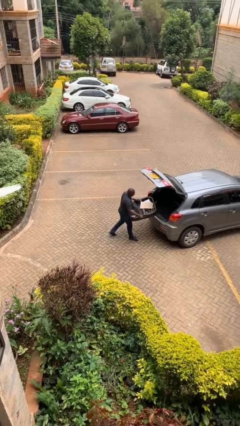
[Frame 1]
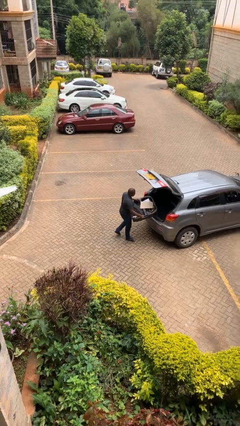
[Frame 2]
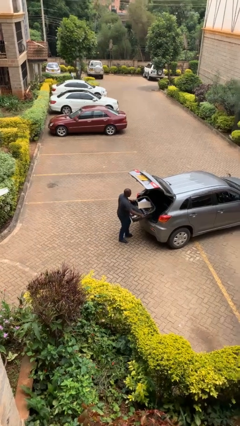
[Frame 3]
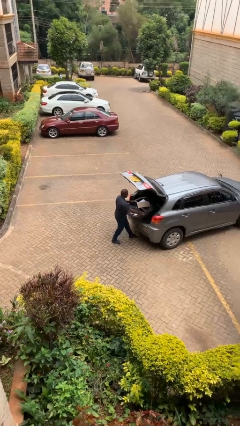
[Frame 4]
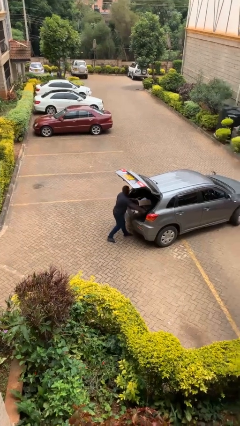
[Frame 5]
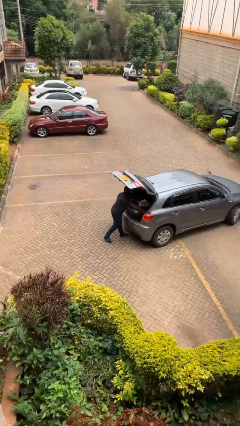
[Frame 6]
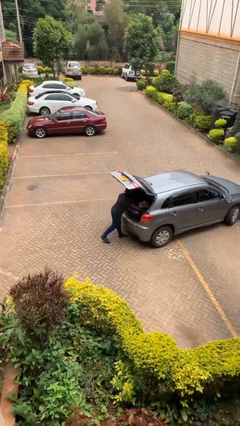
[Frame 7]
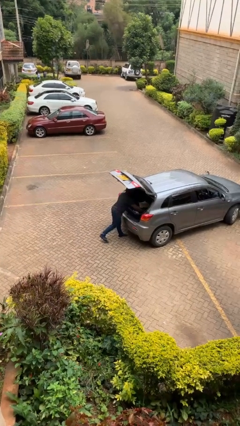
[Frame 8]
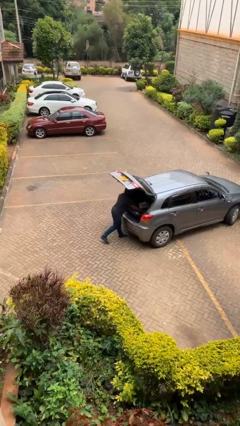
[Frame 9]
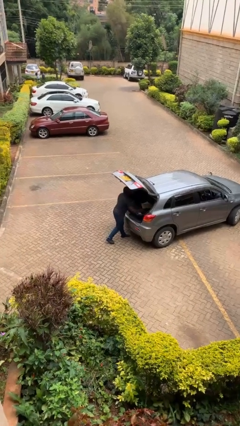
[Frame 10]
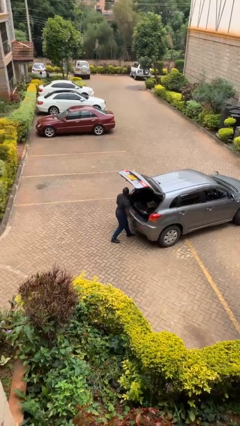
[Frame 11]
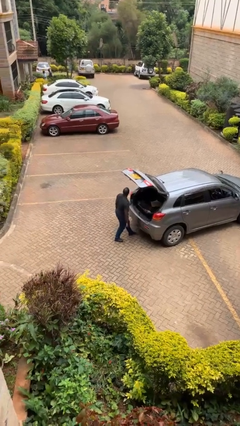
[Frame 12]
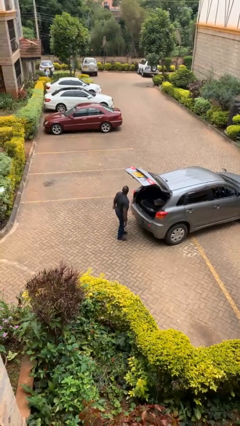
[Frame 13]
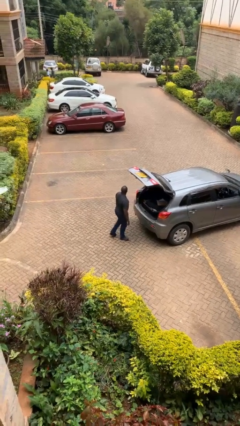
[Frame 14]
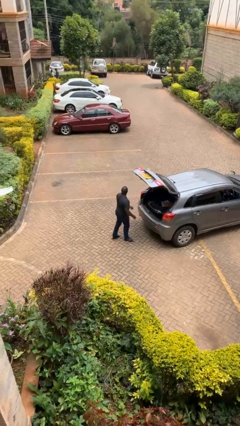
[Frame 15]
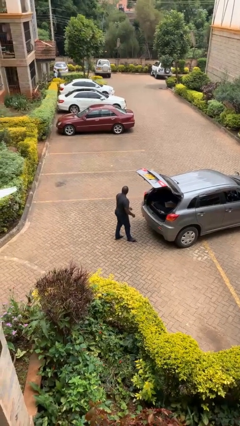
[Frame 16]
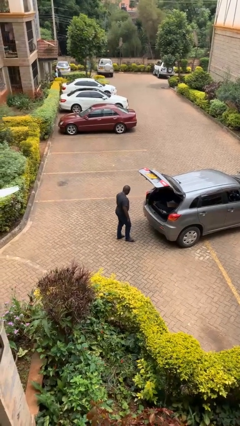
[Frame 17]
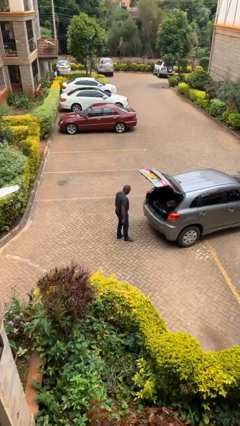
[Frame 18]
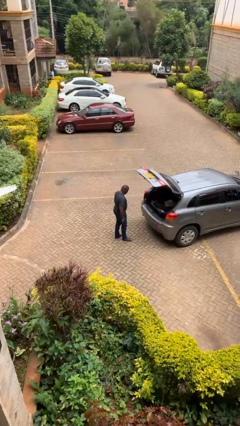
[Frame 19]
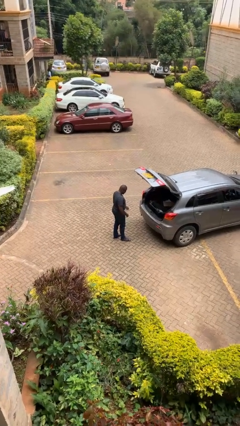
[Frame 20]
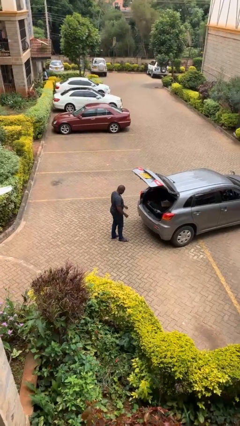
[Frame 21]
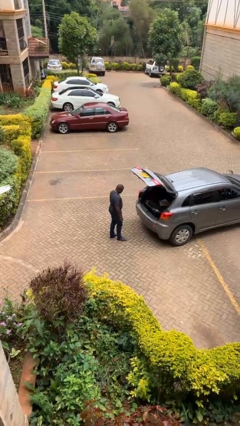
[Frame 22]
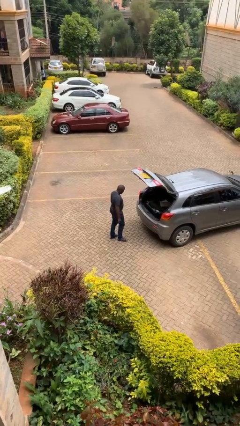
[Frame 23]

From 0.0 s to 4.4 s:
person loads car

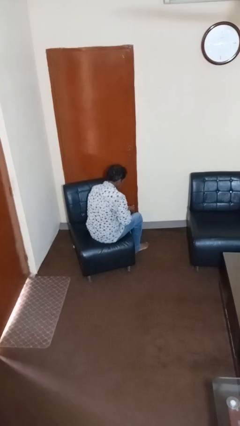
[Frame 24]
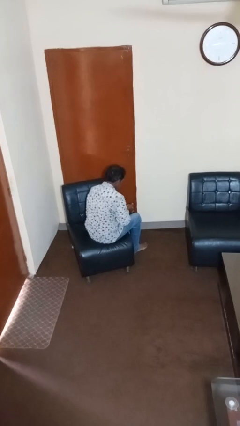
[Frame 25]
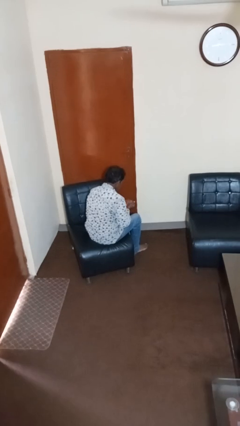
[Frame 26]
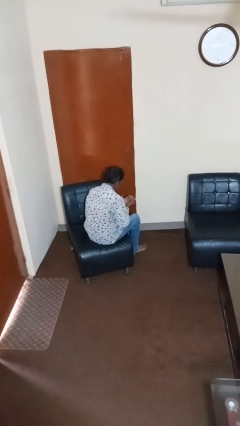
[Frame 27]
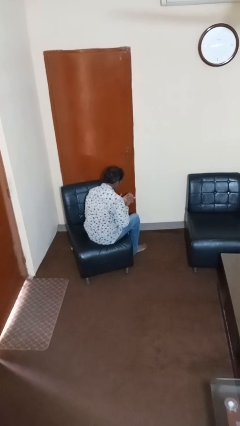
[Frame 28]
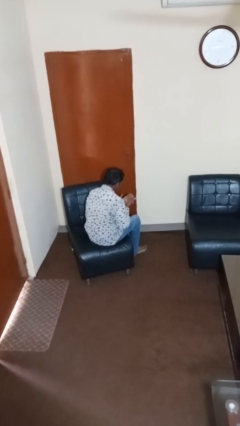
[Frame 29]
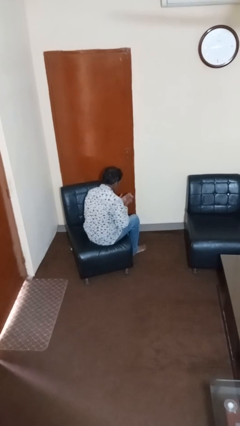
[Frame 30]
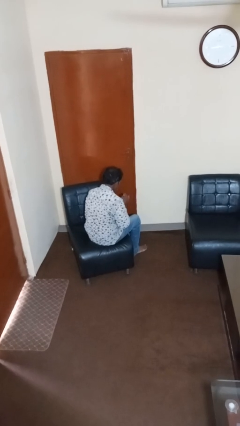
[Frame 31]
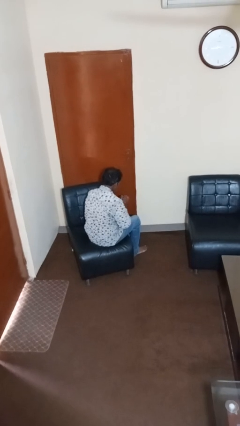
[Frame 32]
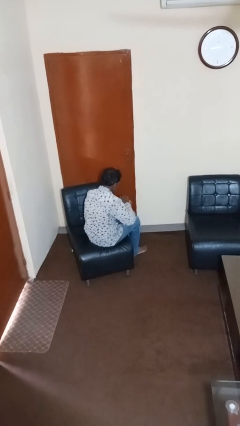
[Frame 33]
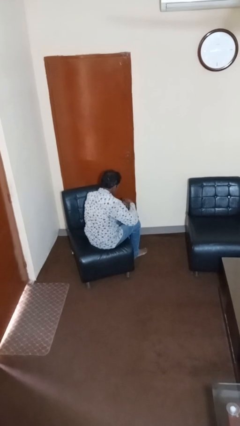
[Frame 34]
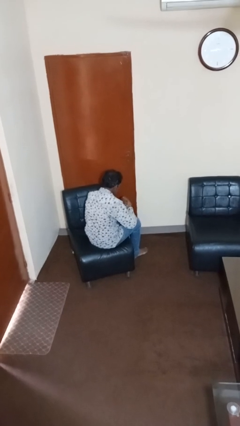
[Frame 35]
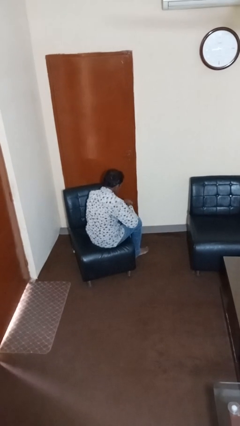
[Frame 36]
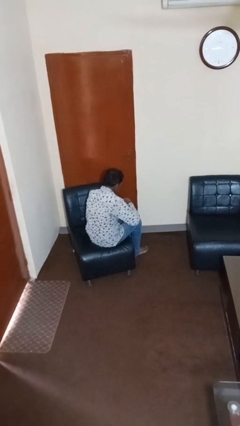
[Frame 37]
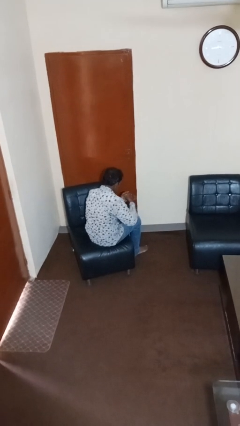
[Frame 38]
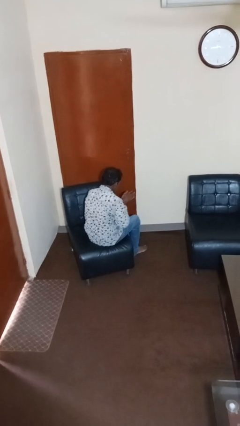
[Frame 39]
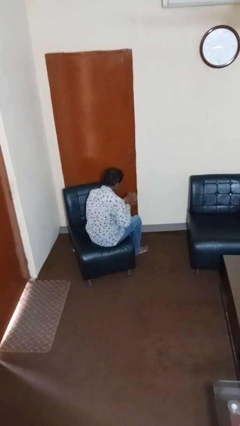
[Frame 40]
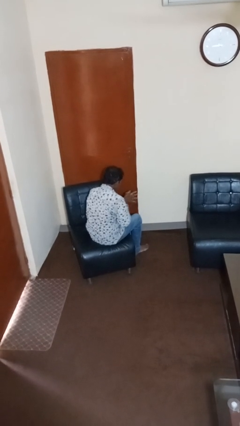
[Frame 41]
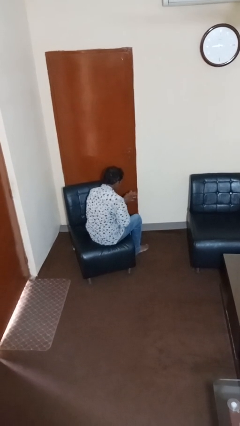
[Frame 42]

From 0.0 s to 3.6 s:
person looks at hands in lap

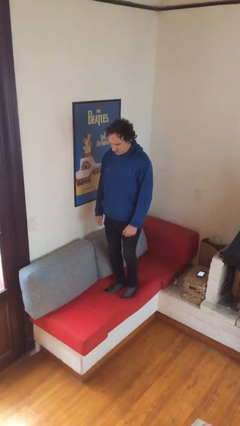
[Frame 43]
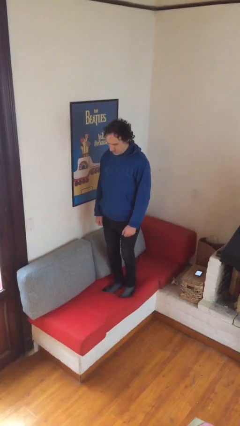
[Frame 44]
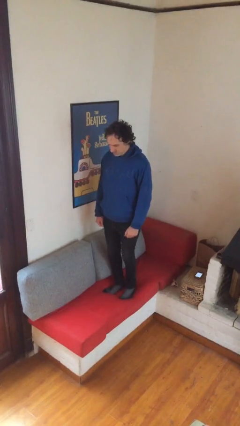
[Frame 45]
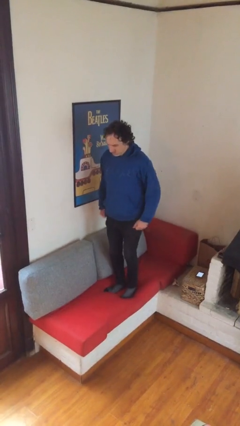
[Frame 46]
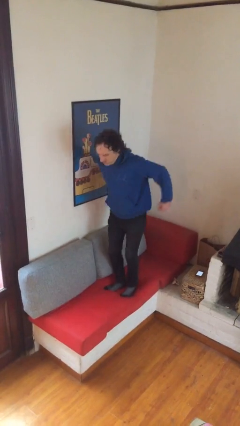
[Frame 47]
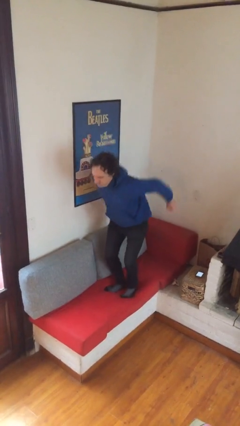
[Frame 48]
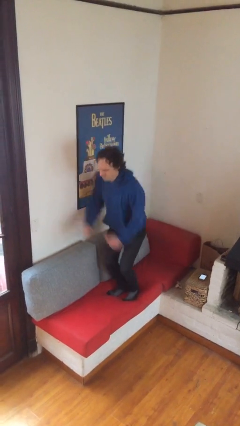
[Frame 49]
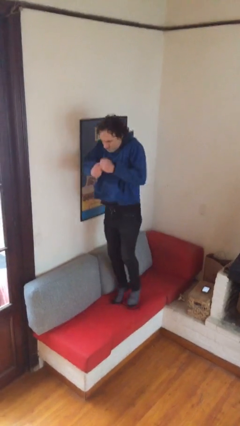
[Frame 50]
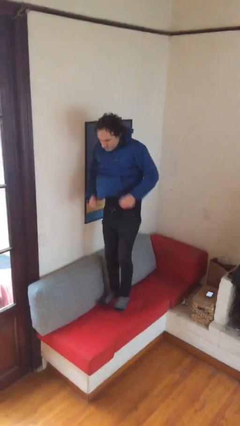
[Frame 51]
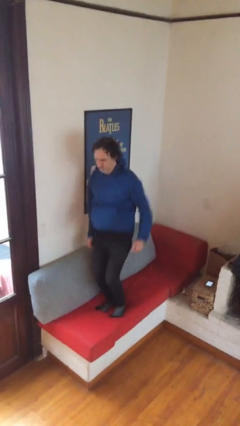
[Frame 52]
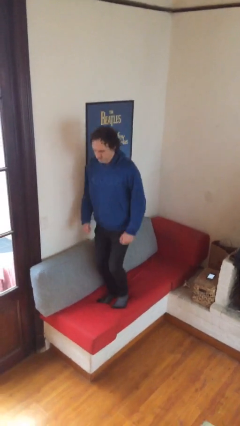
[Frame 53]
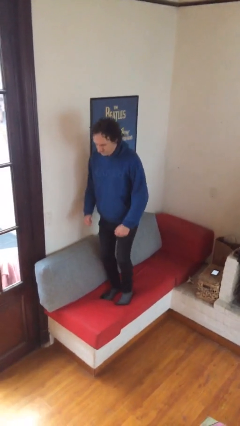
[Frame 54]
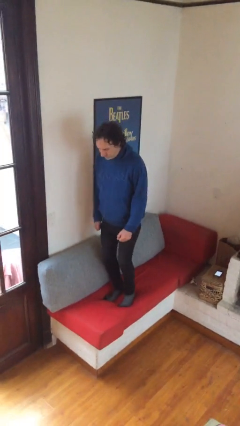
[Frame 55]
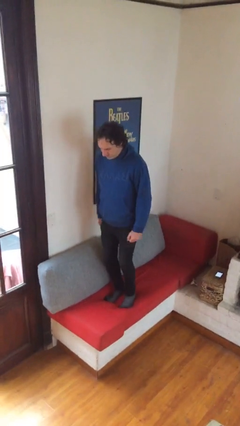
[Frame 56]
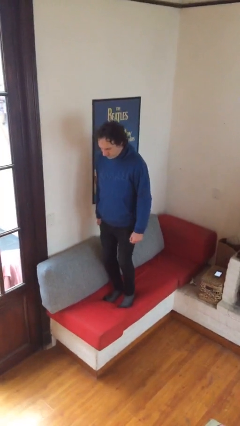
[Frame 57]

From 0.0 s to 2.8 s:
person jumps on couch

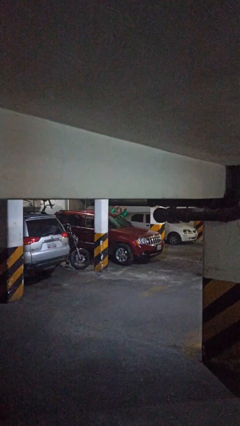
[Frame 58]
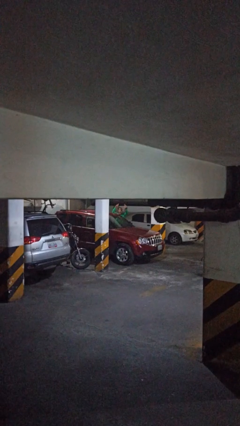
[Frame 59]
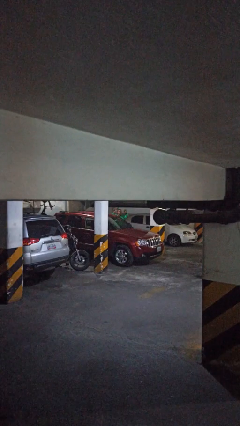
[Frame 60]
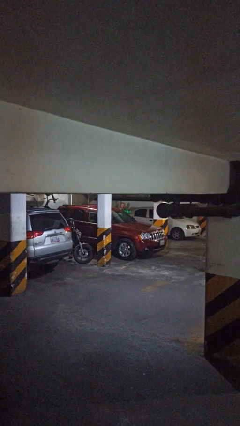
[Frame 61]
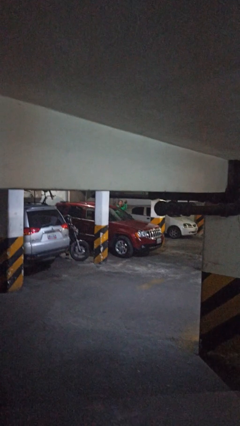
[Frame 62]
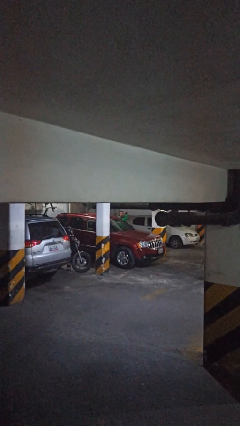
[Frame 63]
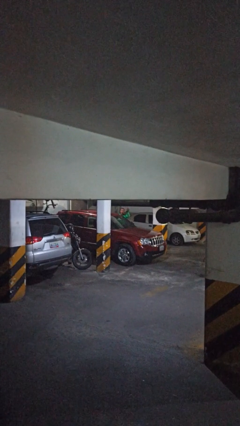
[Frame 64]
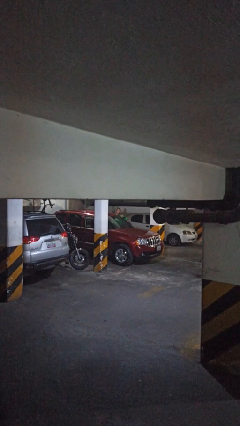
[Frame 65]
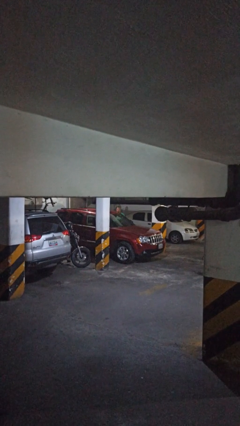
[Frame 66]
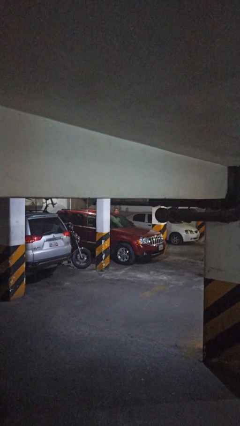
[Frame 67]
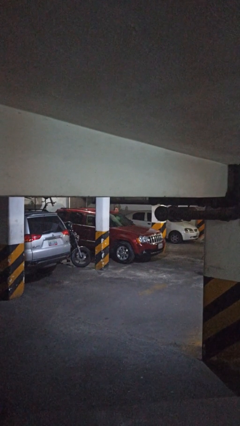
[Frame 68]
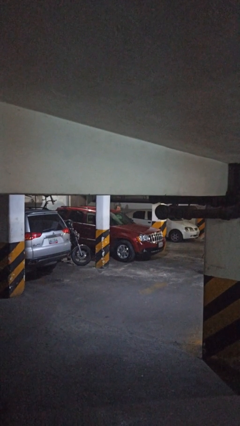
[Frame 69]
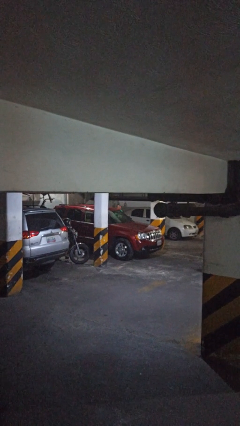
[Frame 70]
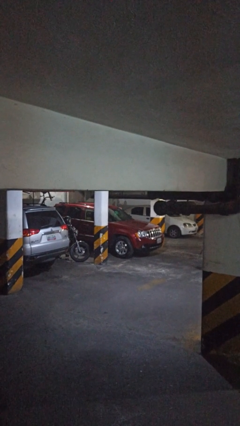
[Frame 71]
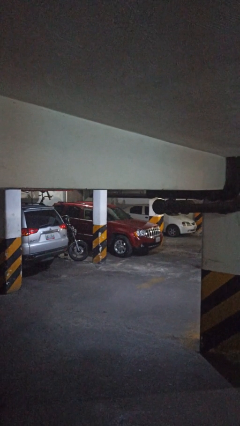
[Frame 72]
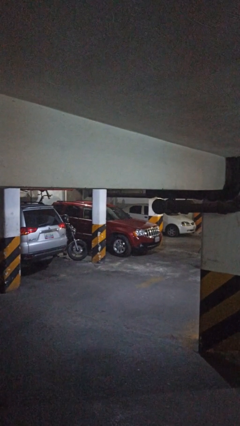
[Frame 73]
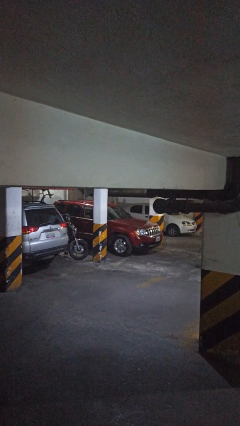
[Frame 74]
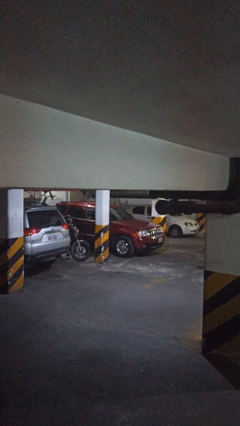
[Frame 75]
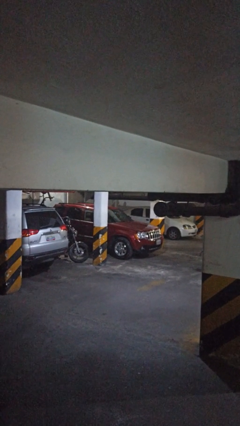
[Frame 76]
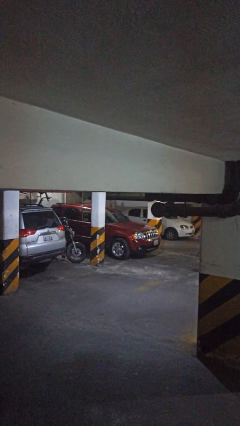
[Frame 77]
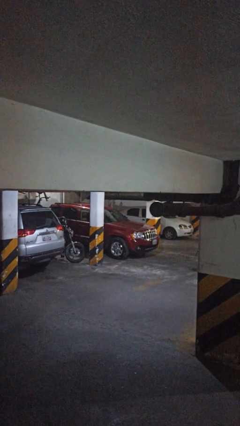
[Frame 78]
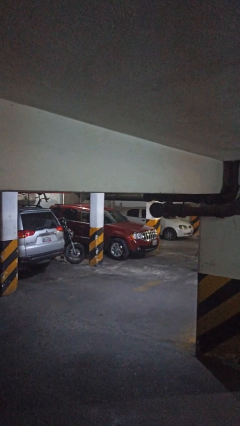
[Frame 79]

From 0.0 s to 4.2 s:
person enters car

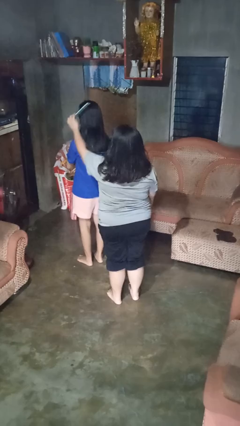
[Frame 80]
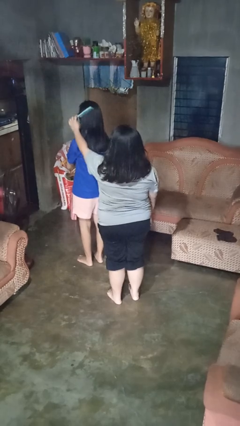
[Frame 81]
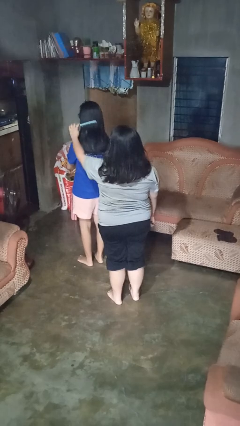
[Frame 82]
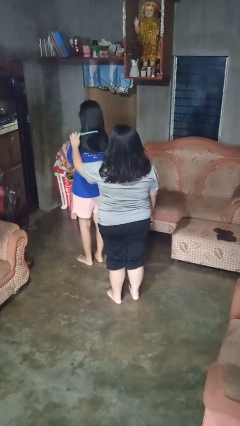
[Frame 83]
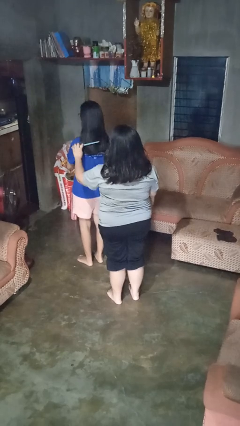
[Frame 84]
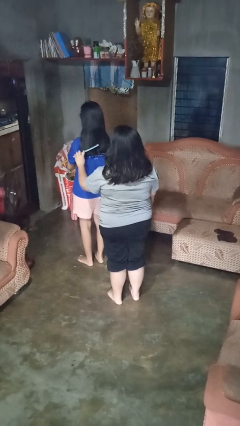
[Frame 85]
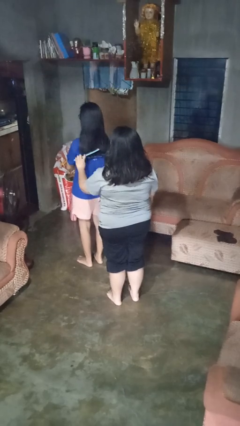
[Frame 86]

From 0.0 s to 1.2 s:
person brushes hair of person

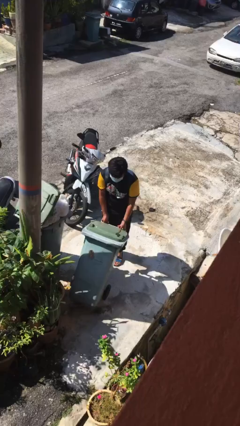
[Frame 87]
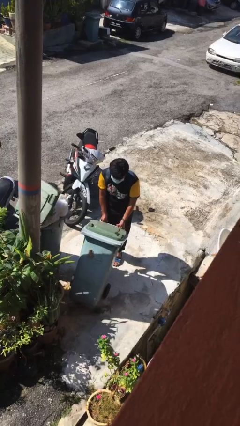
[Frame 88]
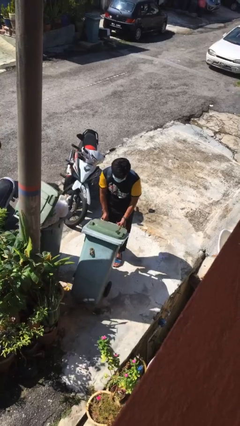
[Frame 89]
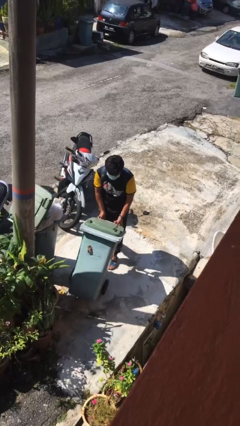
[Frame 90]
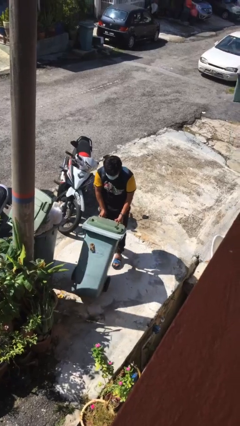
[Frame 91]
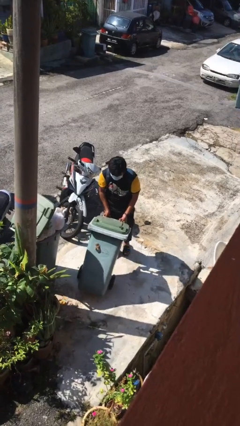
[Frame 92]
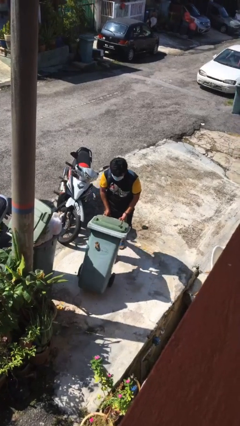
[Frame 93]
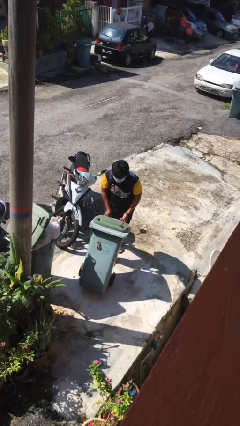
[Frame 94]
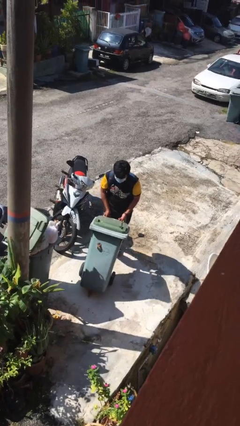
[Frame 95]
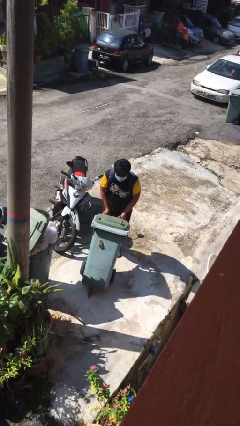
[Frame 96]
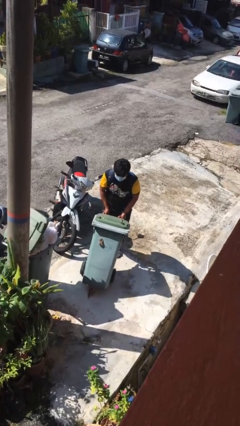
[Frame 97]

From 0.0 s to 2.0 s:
person pulls wheeled trashcan
